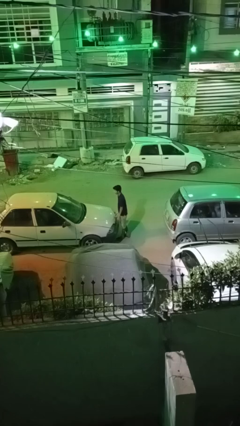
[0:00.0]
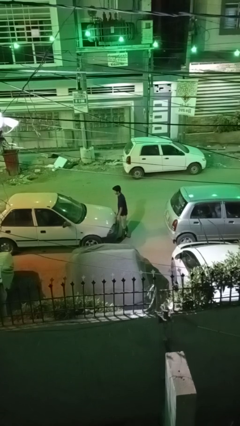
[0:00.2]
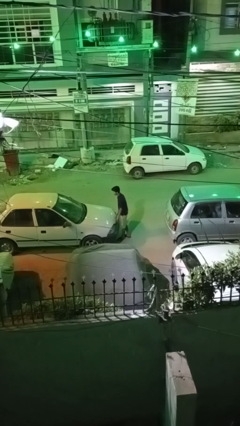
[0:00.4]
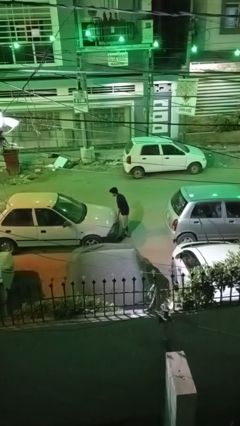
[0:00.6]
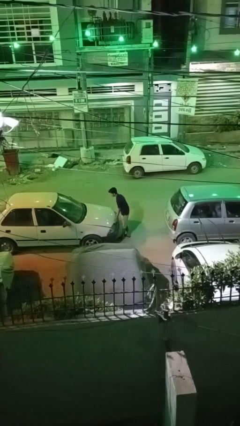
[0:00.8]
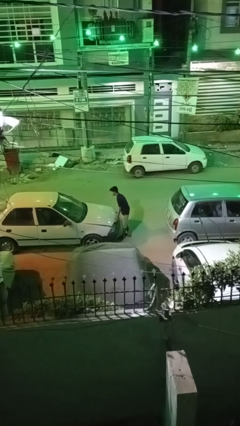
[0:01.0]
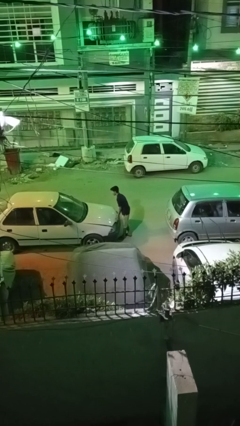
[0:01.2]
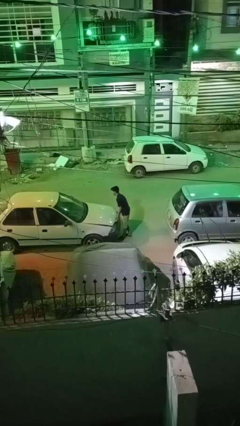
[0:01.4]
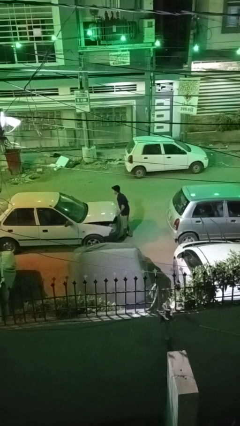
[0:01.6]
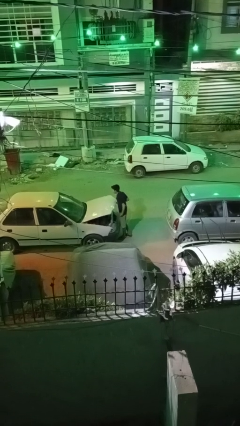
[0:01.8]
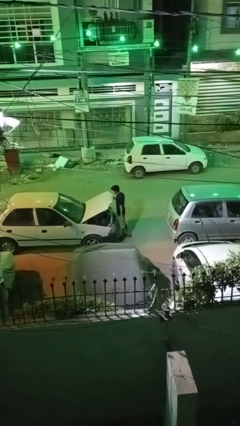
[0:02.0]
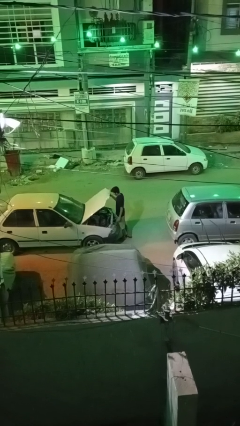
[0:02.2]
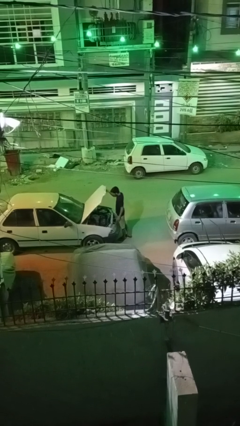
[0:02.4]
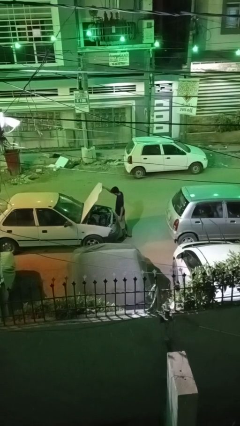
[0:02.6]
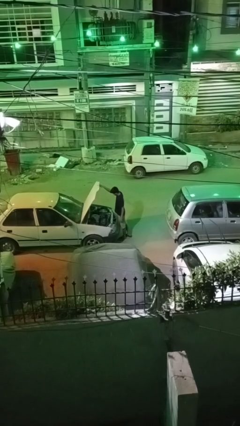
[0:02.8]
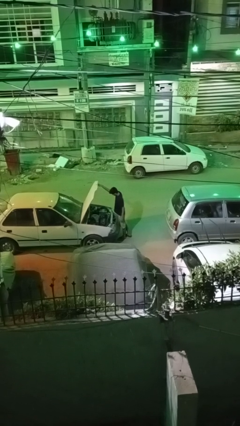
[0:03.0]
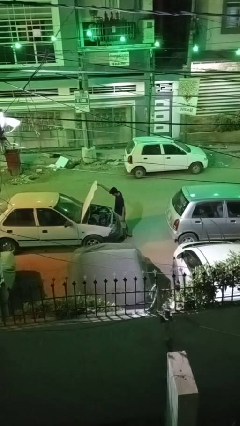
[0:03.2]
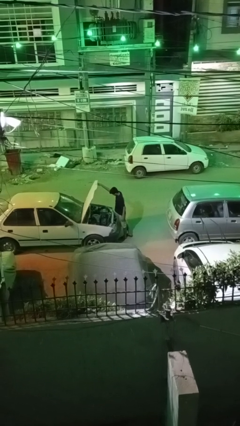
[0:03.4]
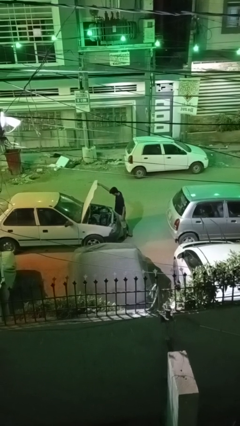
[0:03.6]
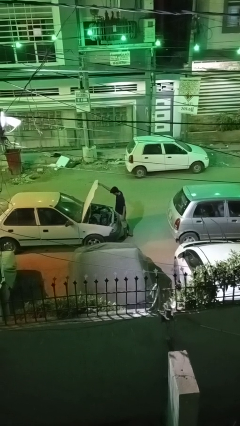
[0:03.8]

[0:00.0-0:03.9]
person opens car hood

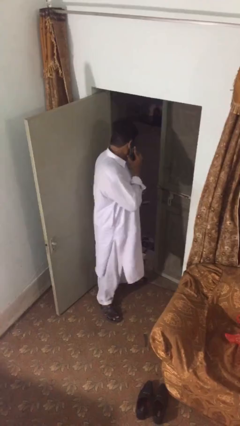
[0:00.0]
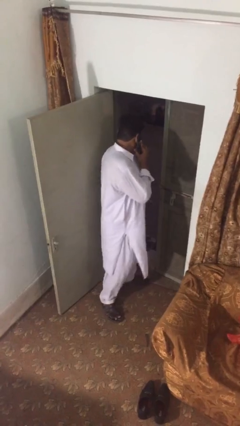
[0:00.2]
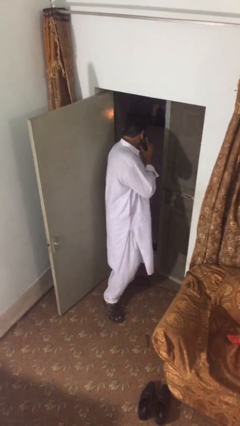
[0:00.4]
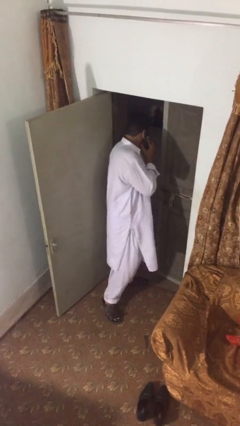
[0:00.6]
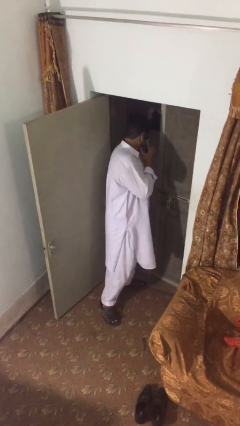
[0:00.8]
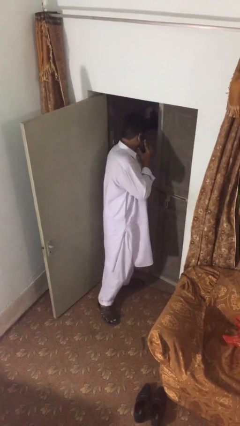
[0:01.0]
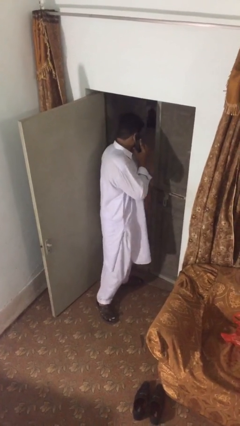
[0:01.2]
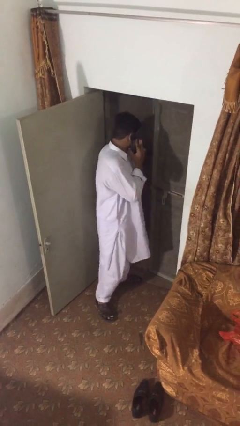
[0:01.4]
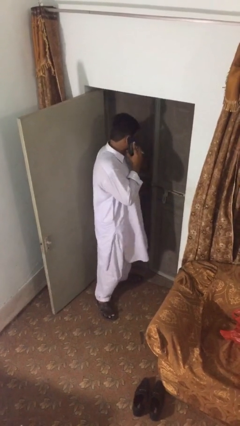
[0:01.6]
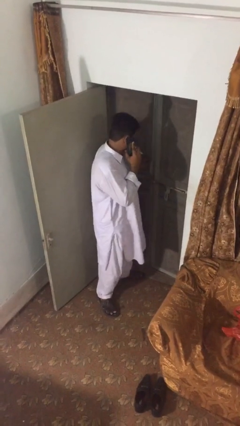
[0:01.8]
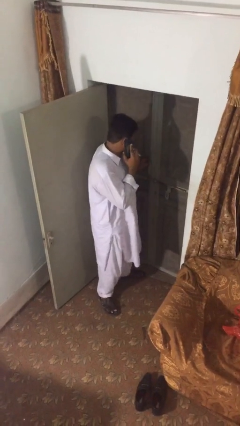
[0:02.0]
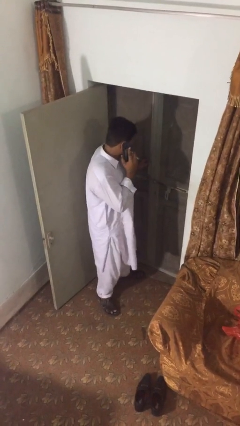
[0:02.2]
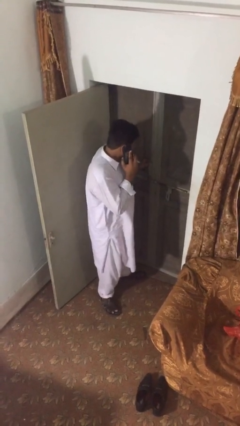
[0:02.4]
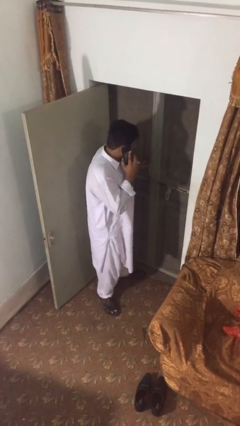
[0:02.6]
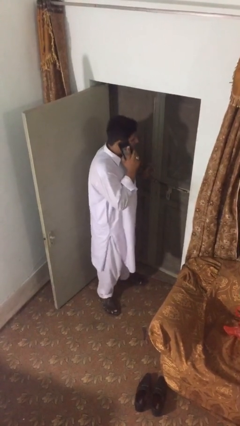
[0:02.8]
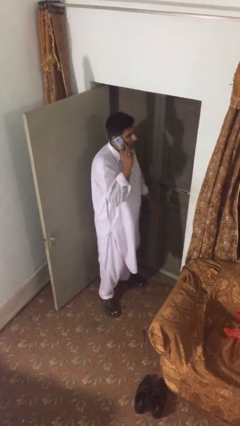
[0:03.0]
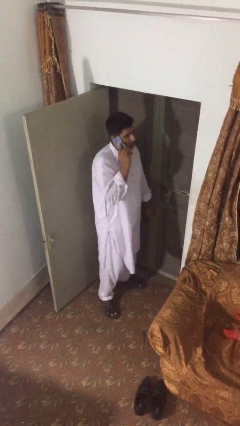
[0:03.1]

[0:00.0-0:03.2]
person closes facility door

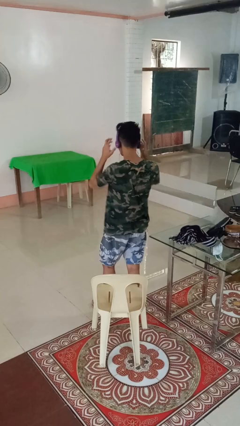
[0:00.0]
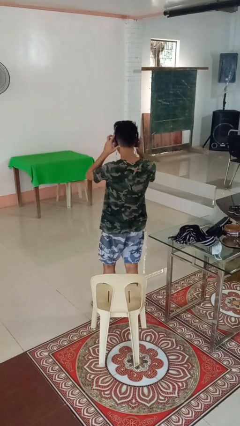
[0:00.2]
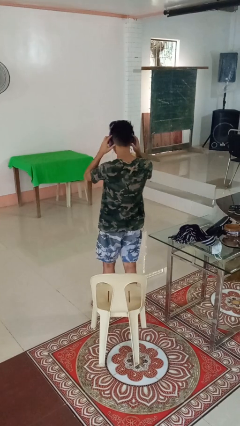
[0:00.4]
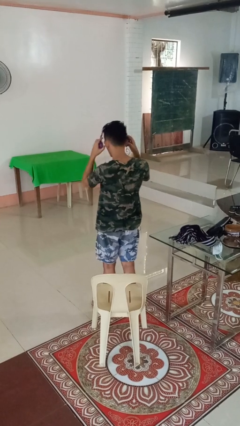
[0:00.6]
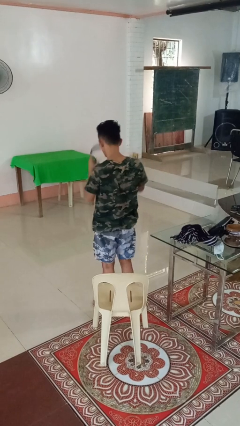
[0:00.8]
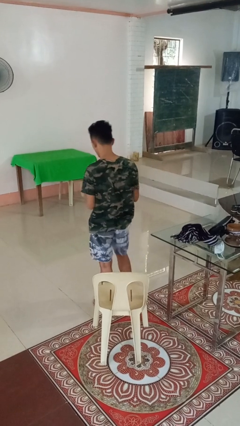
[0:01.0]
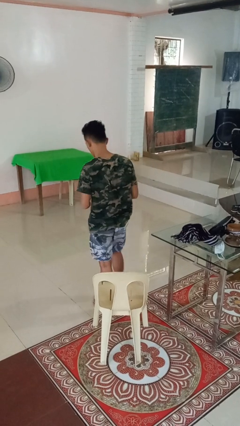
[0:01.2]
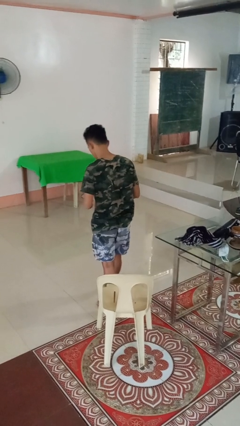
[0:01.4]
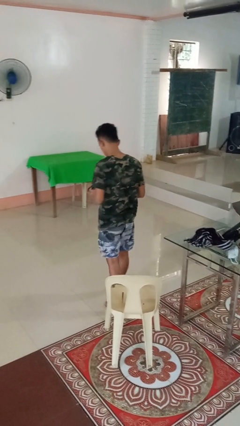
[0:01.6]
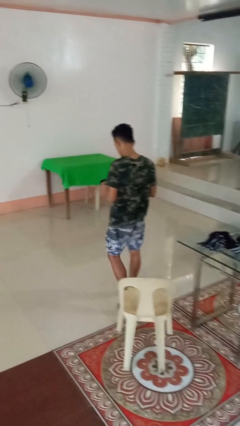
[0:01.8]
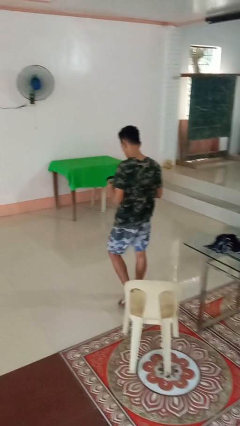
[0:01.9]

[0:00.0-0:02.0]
person takes off headphones

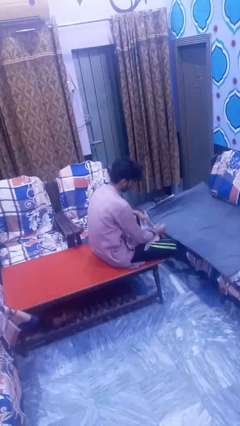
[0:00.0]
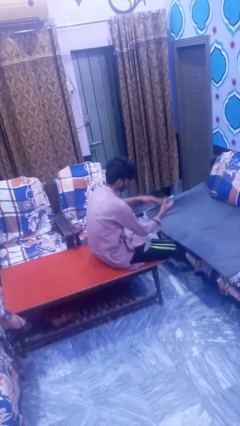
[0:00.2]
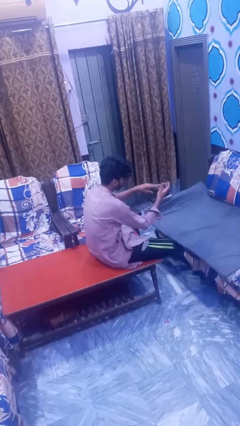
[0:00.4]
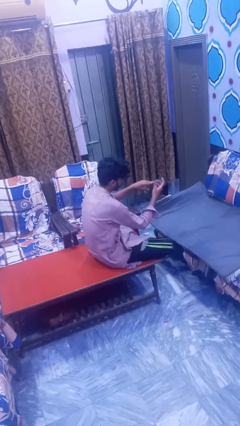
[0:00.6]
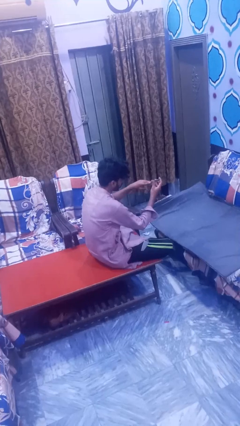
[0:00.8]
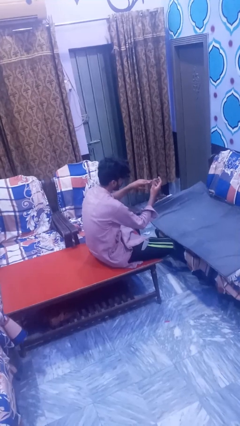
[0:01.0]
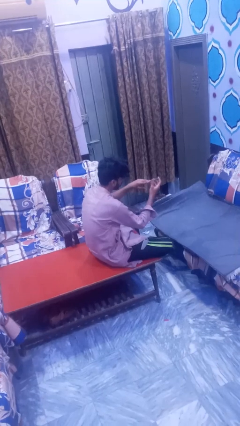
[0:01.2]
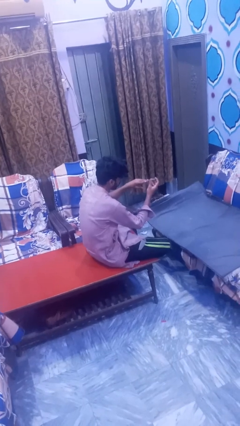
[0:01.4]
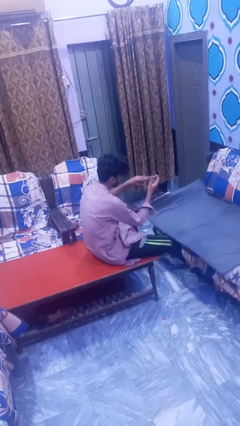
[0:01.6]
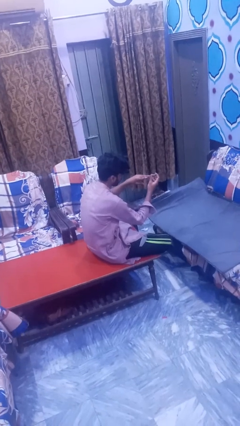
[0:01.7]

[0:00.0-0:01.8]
person clips fingernails

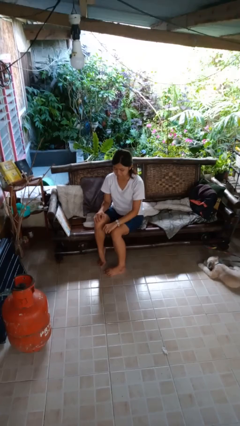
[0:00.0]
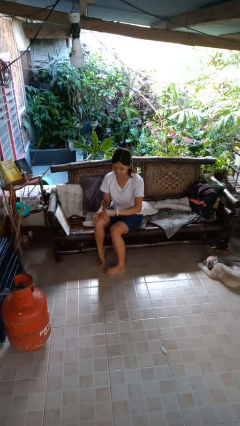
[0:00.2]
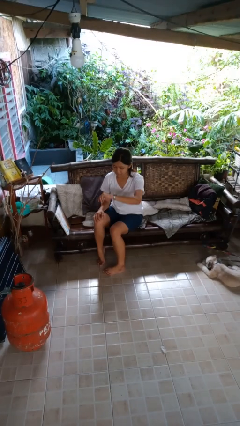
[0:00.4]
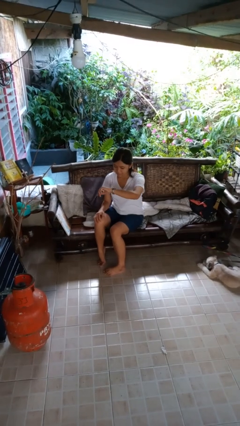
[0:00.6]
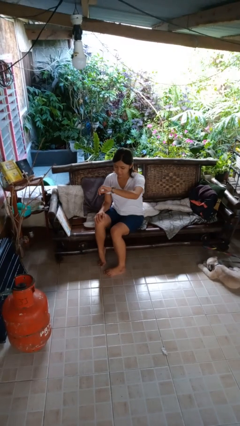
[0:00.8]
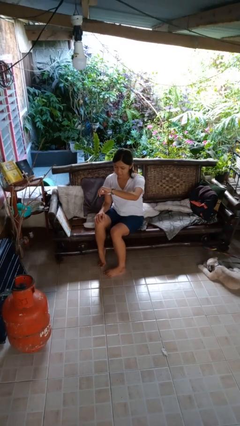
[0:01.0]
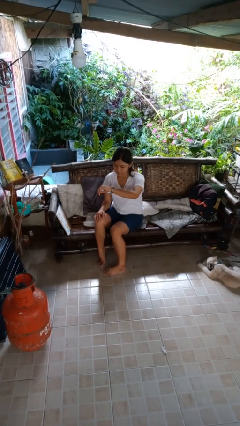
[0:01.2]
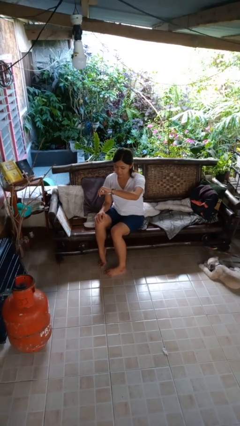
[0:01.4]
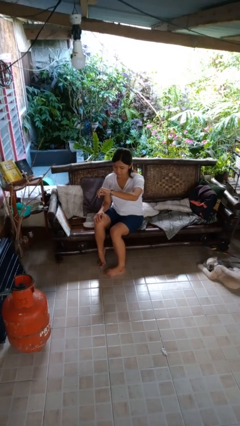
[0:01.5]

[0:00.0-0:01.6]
person looks at wristwatch

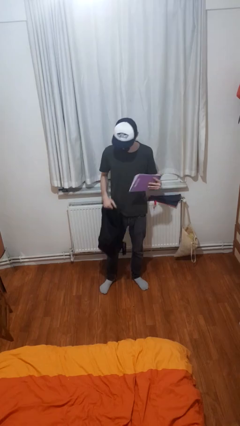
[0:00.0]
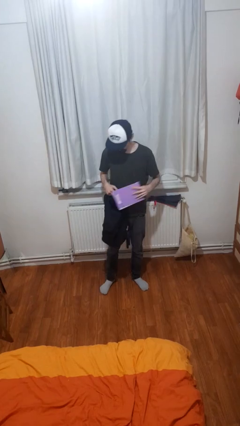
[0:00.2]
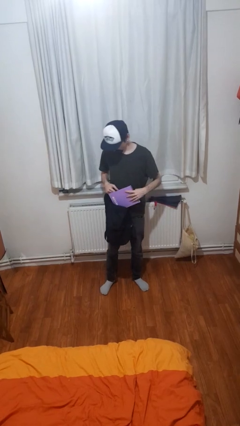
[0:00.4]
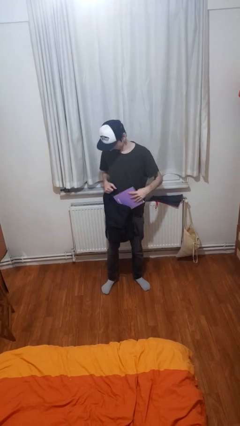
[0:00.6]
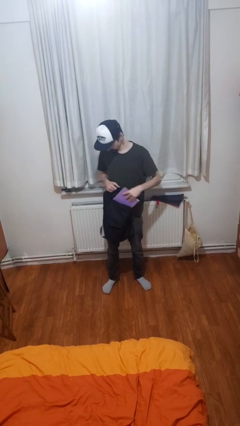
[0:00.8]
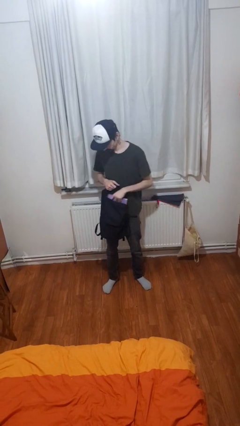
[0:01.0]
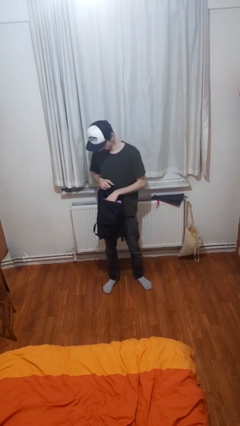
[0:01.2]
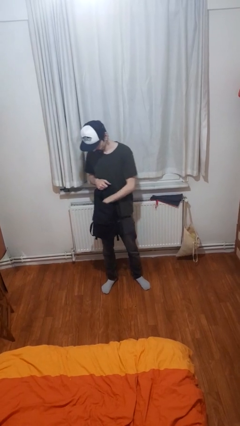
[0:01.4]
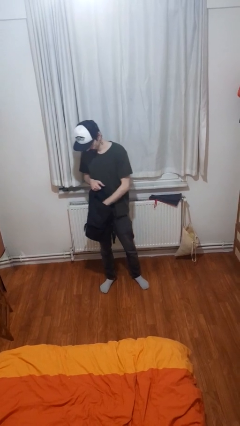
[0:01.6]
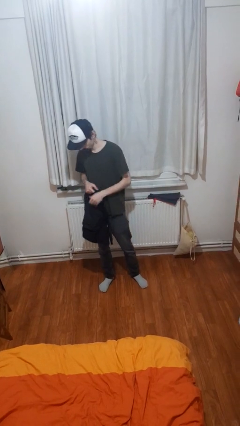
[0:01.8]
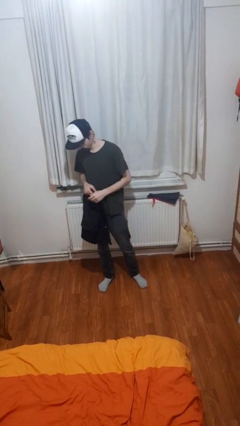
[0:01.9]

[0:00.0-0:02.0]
person puts object into backpack

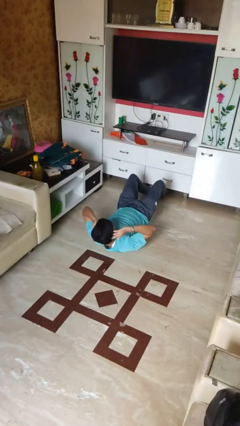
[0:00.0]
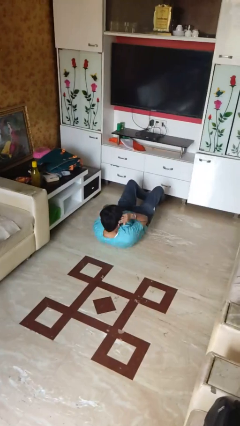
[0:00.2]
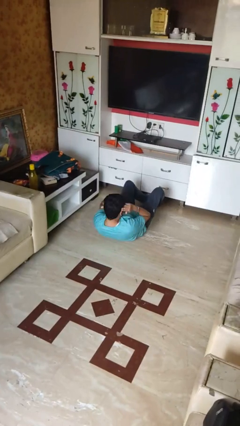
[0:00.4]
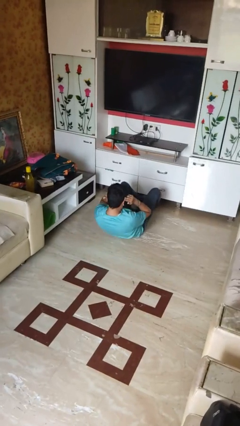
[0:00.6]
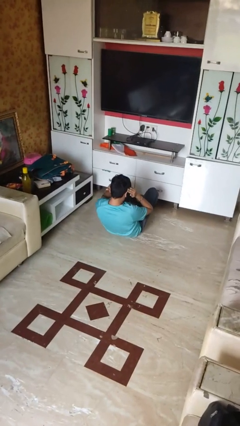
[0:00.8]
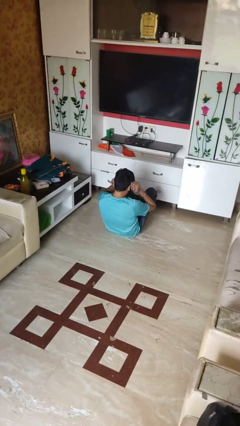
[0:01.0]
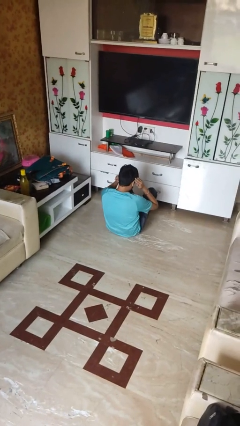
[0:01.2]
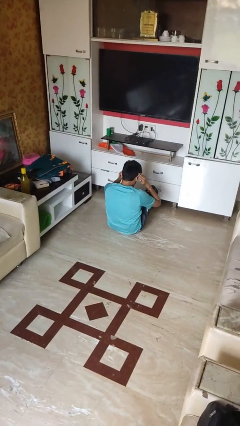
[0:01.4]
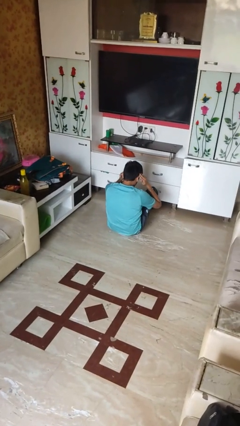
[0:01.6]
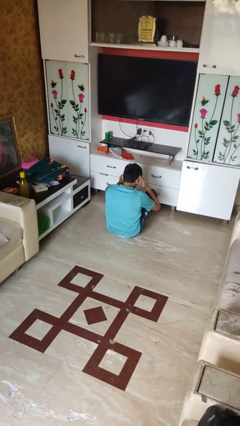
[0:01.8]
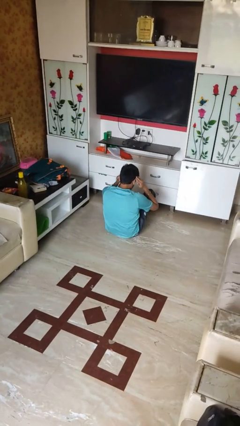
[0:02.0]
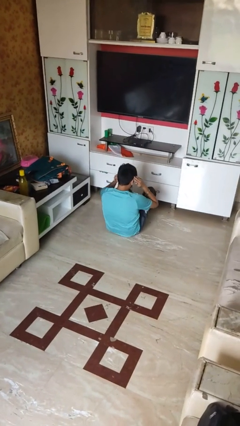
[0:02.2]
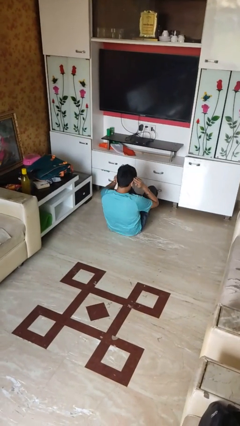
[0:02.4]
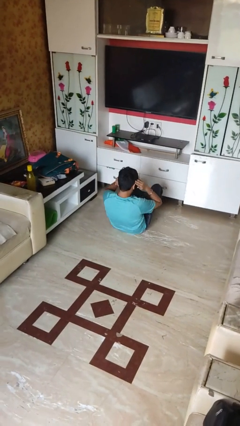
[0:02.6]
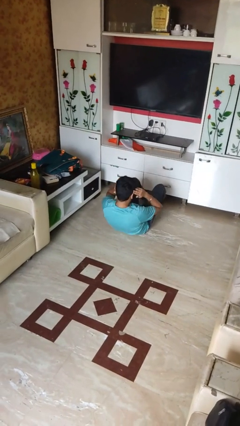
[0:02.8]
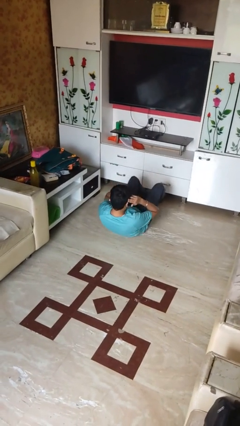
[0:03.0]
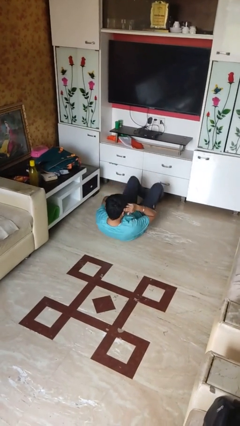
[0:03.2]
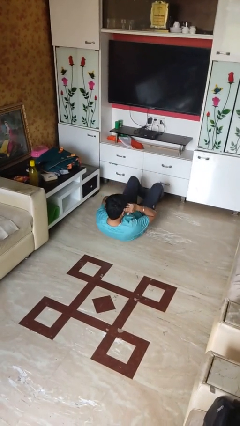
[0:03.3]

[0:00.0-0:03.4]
person exercises with situp
